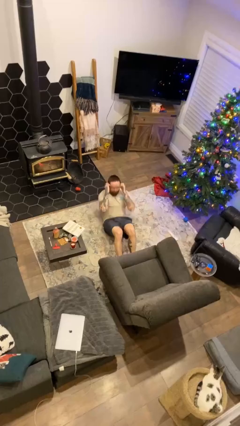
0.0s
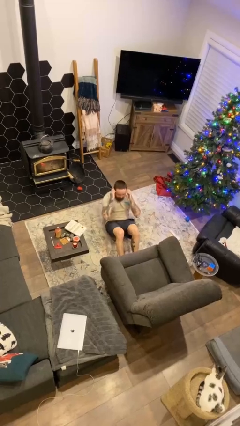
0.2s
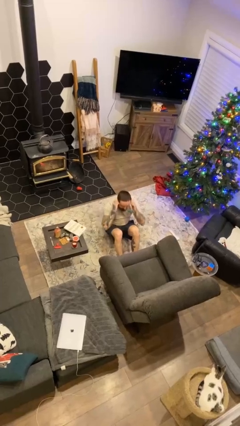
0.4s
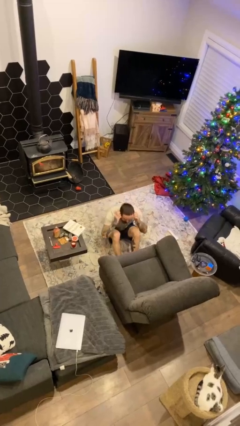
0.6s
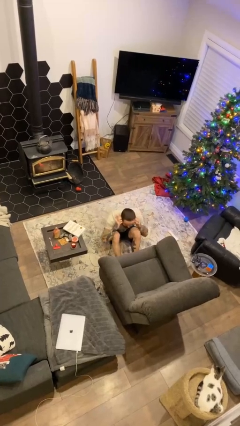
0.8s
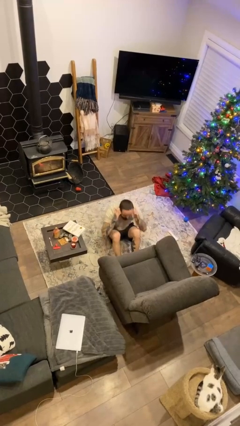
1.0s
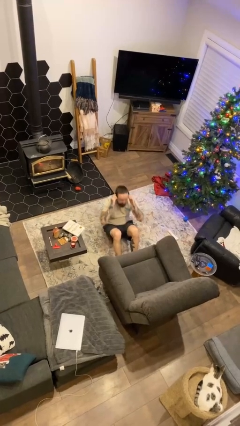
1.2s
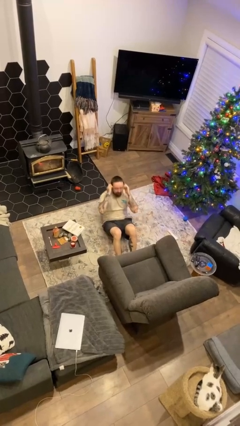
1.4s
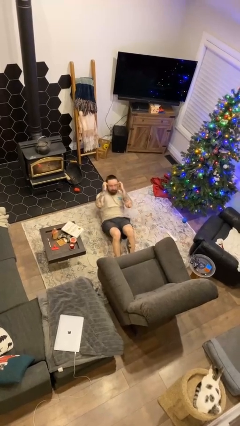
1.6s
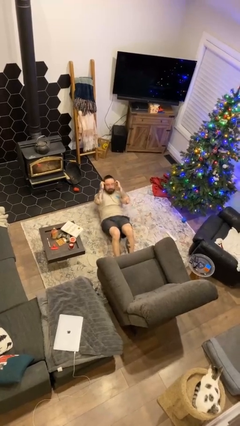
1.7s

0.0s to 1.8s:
person exercises with situp

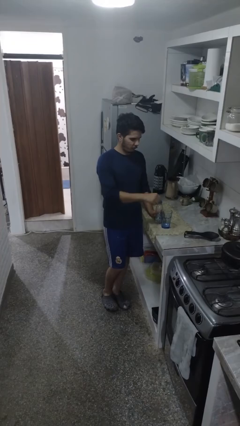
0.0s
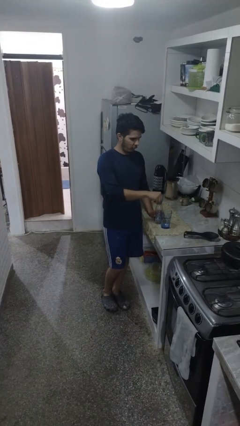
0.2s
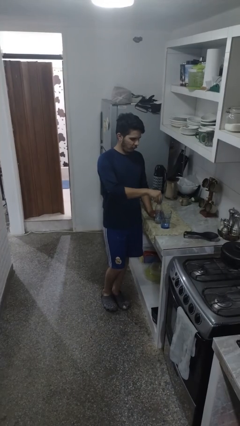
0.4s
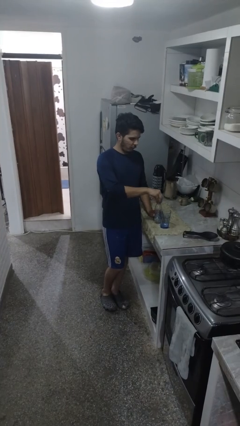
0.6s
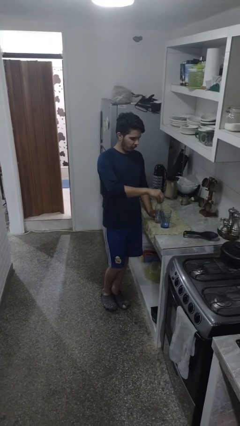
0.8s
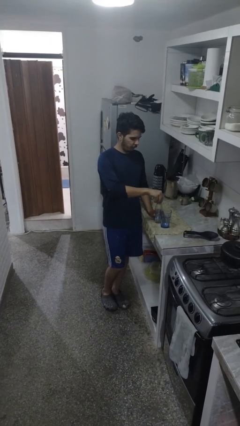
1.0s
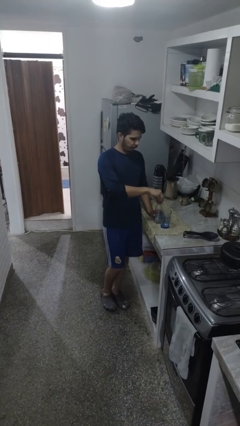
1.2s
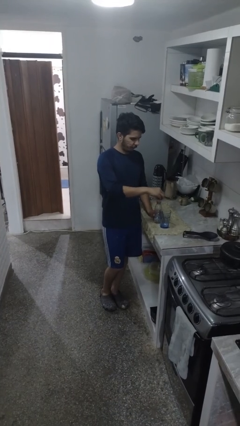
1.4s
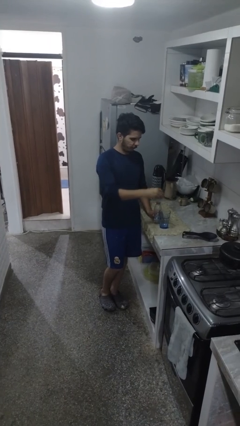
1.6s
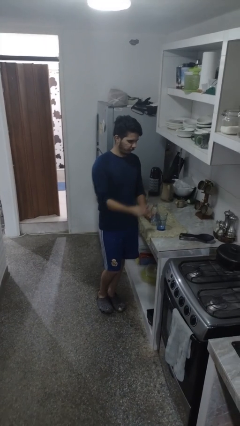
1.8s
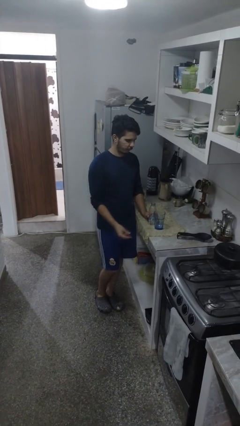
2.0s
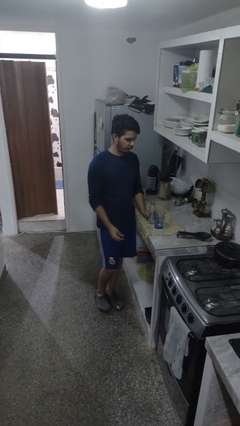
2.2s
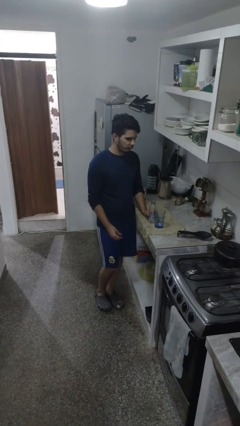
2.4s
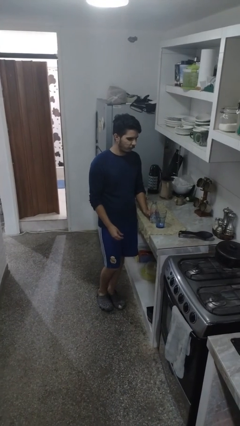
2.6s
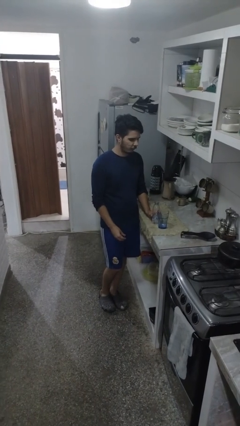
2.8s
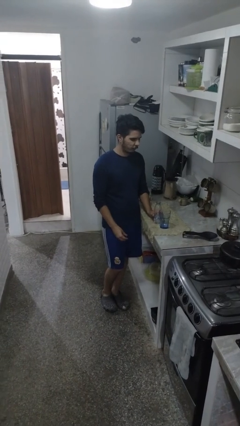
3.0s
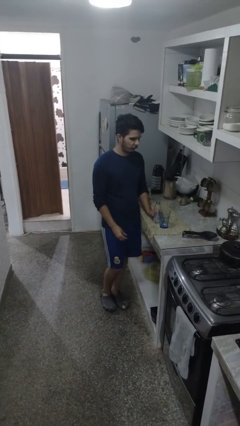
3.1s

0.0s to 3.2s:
person unscrews lid from bottle

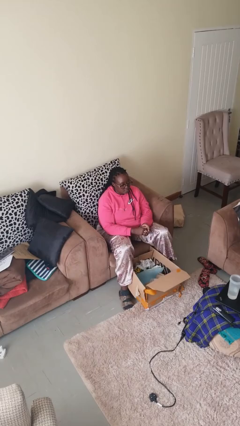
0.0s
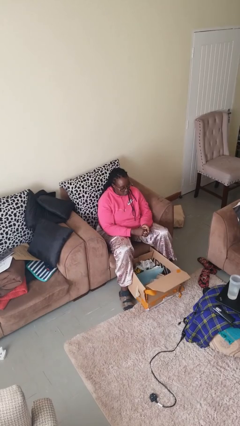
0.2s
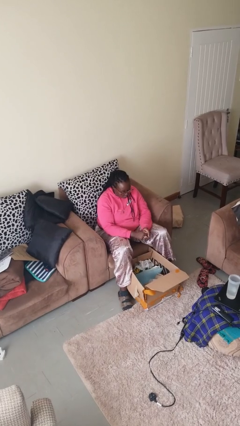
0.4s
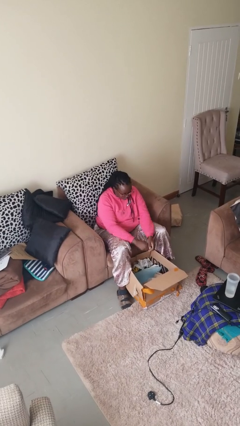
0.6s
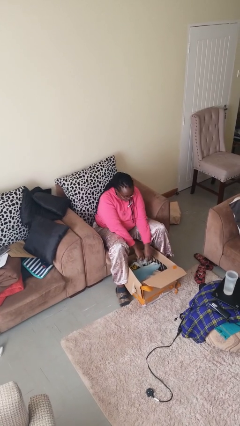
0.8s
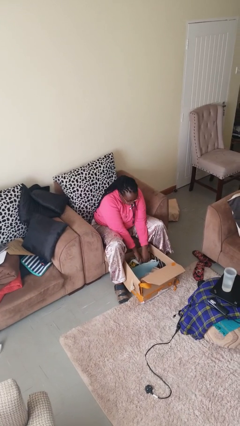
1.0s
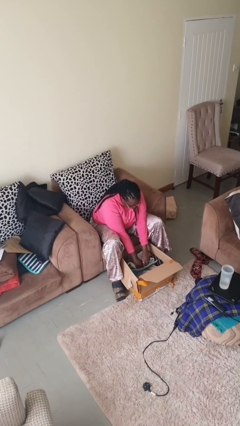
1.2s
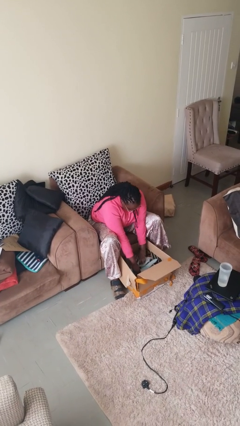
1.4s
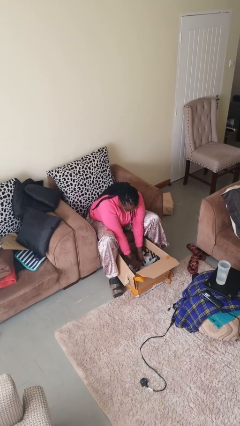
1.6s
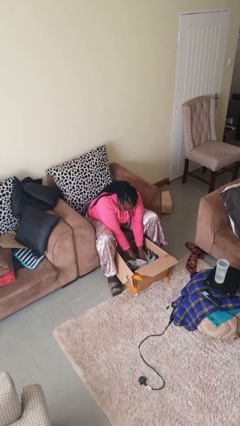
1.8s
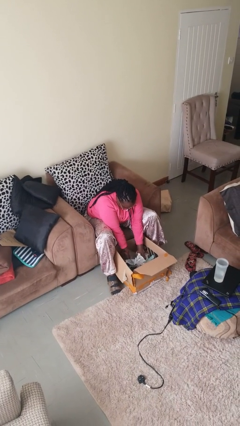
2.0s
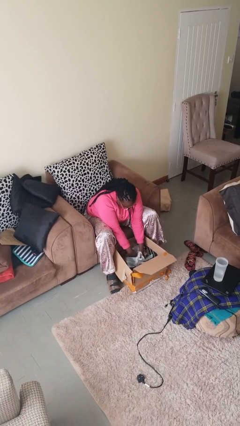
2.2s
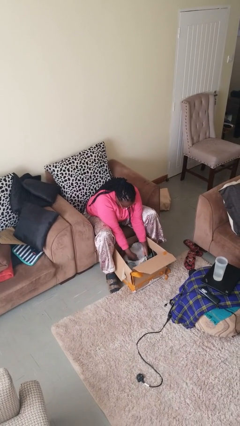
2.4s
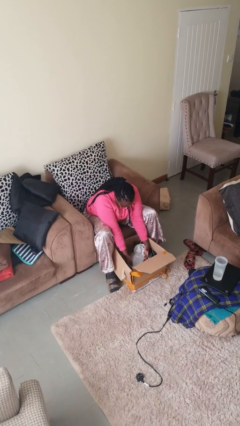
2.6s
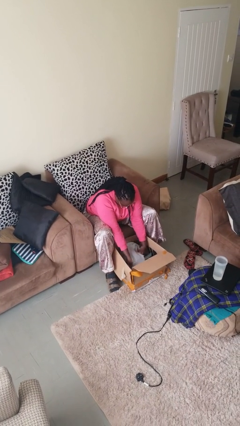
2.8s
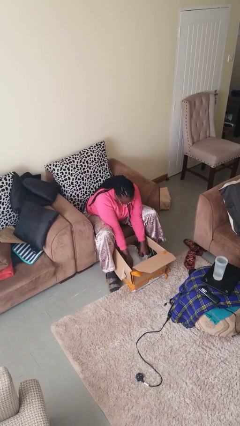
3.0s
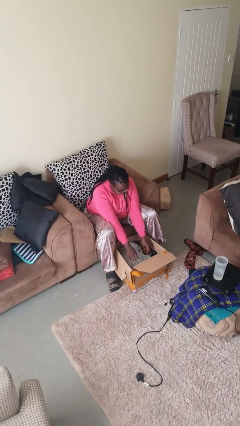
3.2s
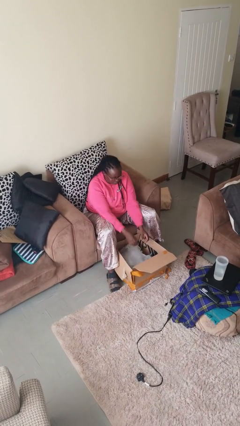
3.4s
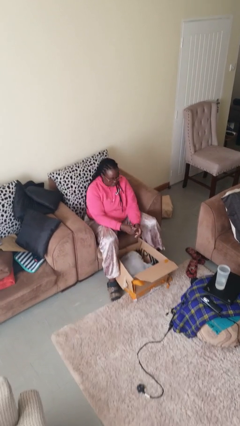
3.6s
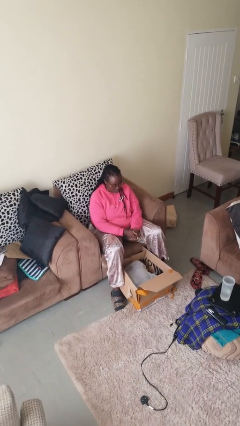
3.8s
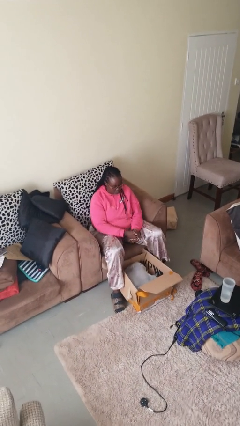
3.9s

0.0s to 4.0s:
person searches in box

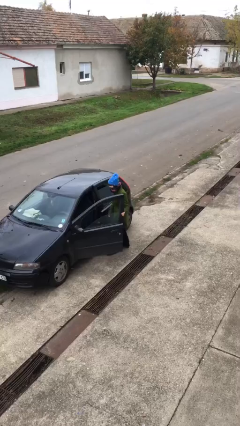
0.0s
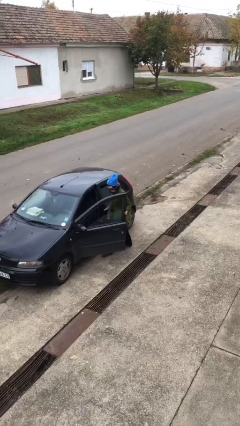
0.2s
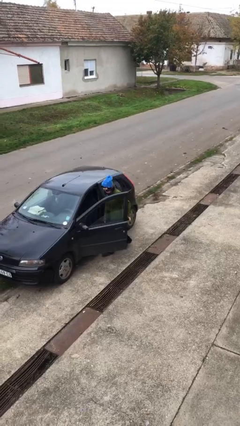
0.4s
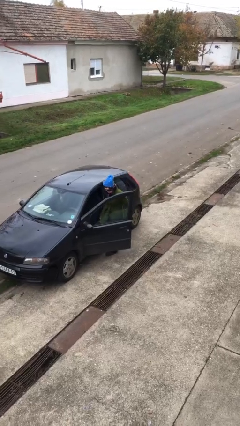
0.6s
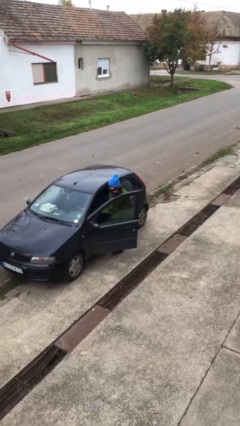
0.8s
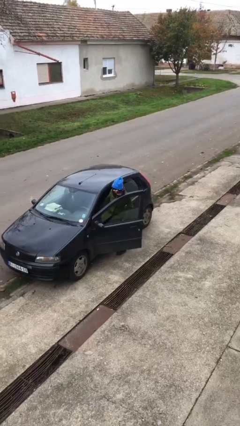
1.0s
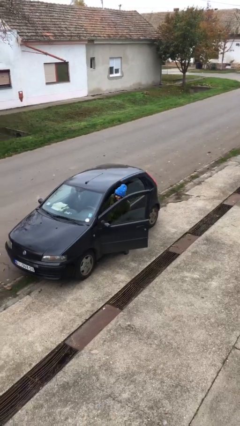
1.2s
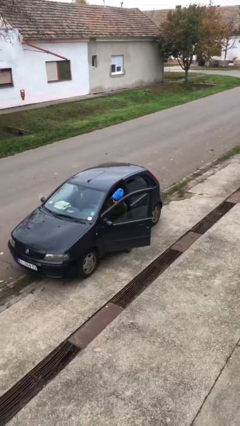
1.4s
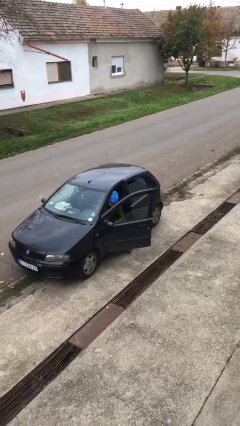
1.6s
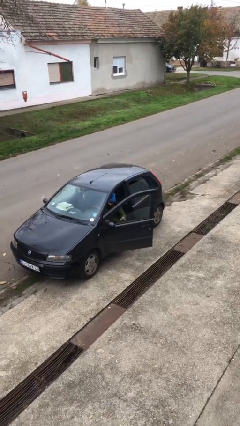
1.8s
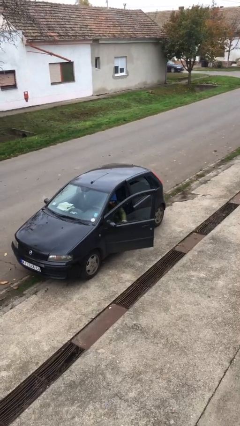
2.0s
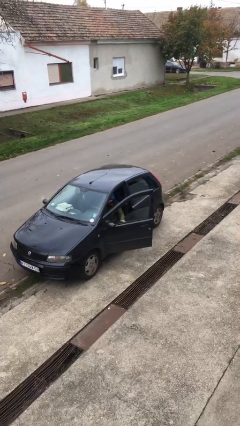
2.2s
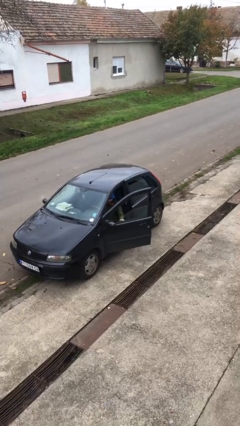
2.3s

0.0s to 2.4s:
person enters car

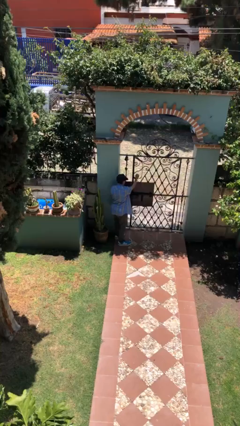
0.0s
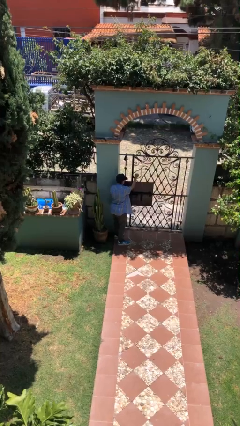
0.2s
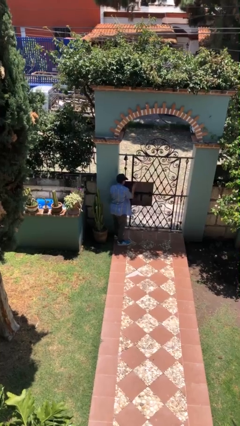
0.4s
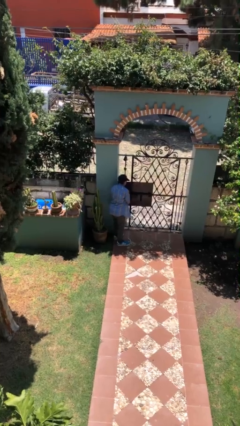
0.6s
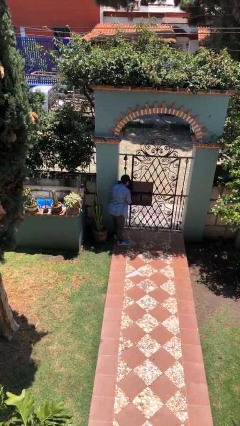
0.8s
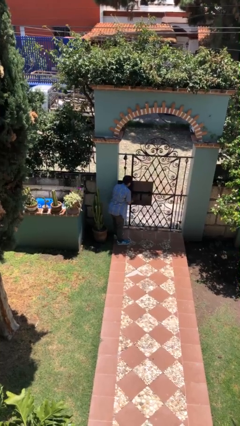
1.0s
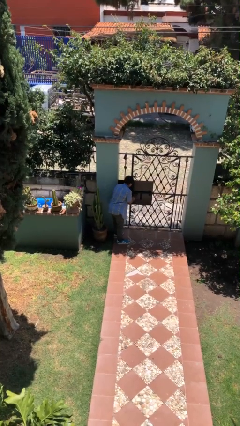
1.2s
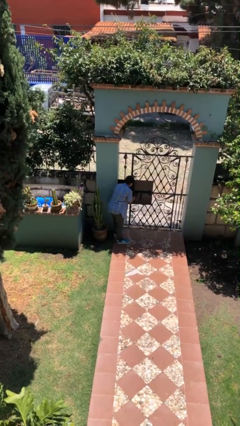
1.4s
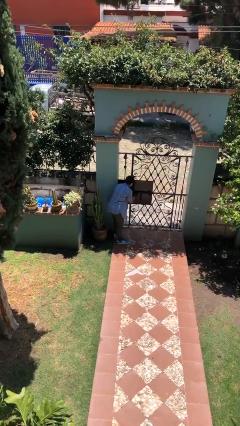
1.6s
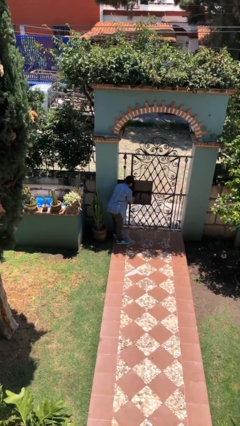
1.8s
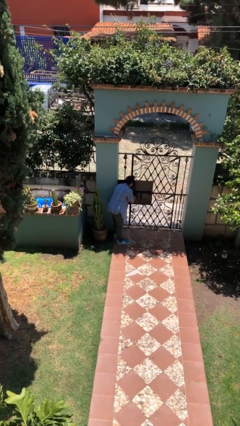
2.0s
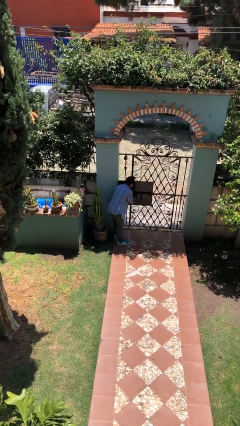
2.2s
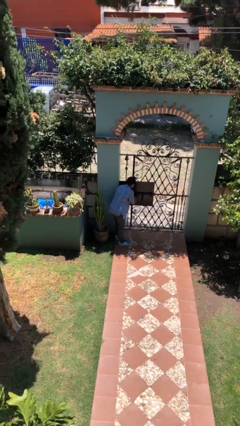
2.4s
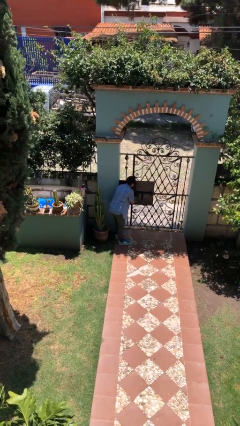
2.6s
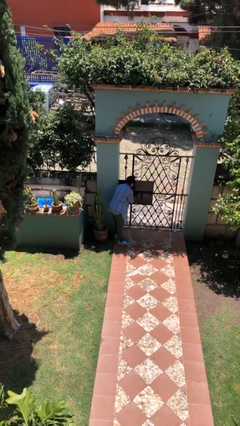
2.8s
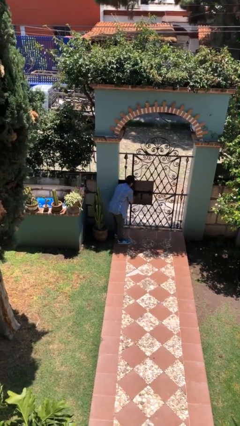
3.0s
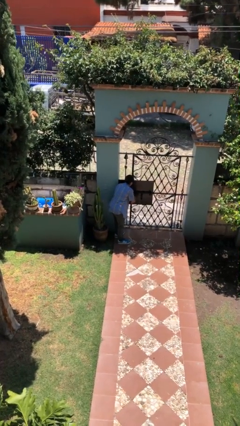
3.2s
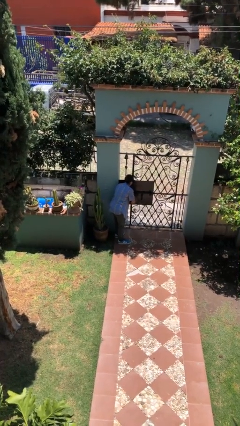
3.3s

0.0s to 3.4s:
person locks door with keys

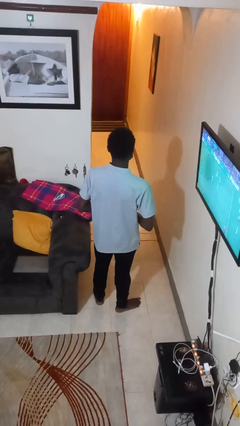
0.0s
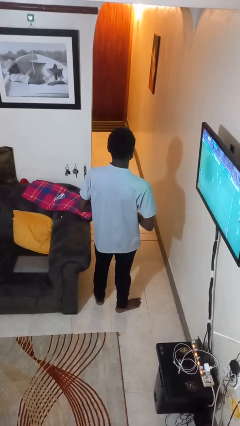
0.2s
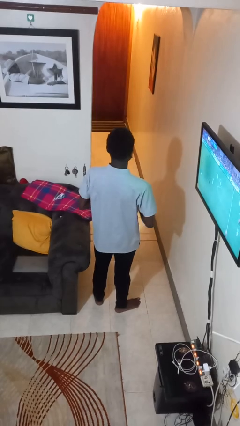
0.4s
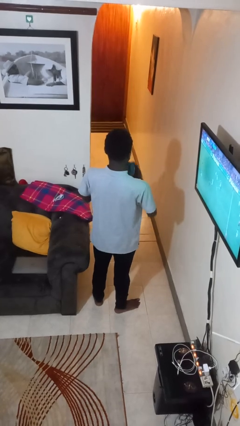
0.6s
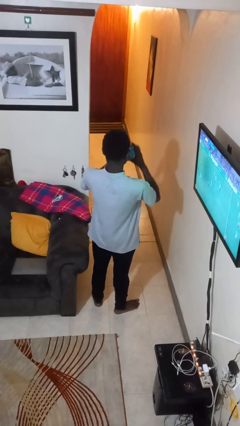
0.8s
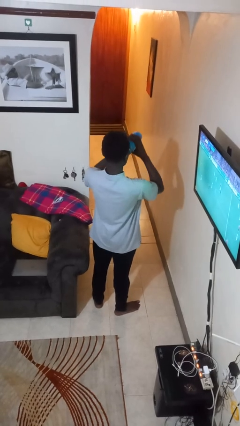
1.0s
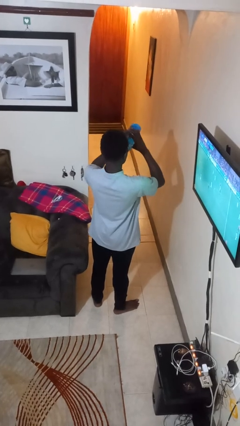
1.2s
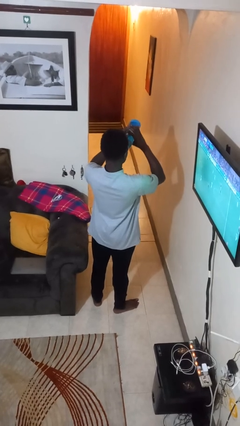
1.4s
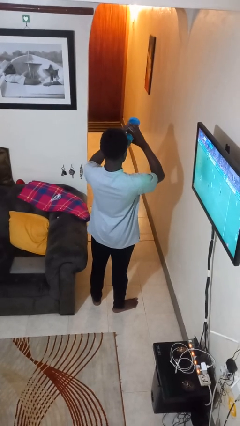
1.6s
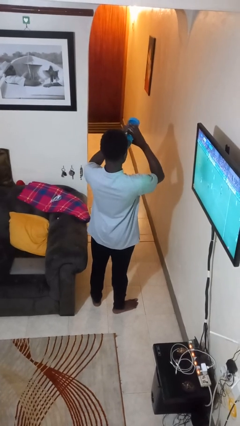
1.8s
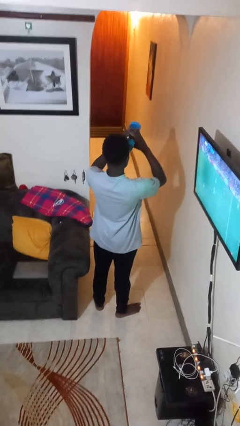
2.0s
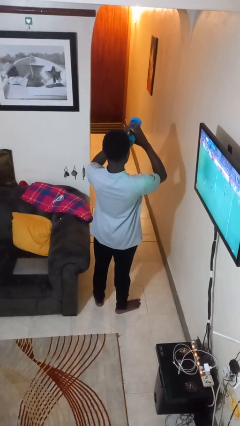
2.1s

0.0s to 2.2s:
person drinks from bottle

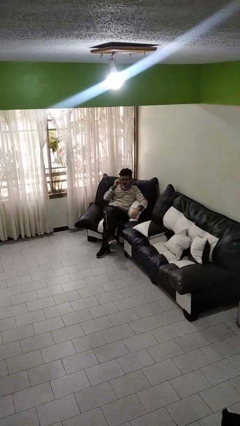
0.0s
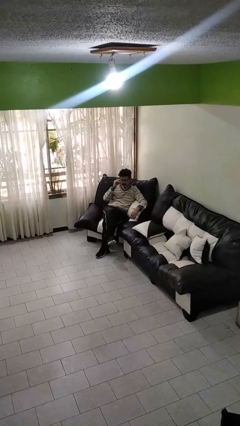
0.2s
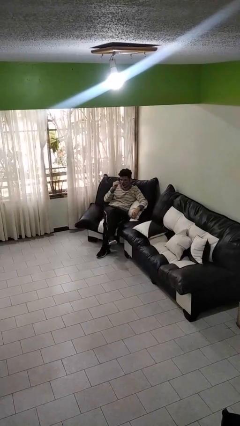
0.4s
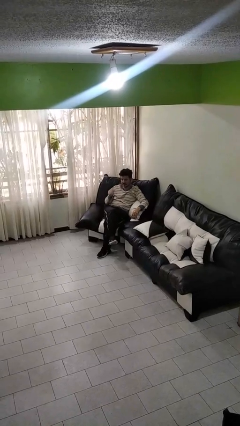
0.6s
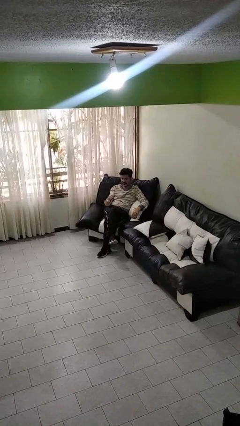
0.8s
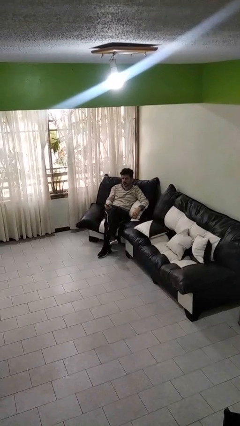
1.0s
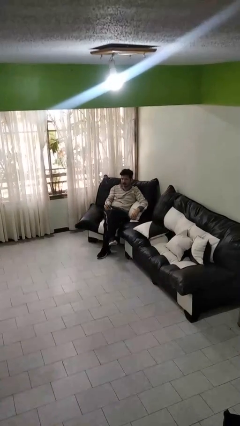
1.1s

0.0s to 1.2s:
person takes off glasses
